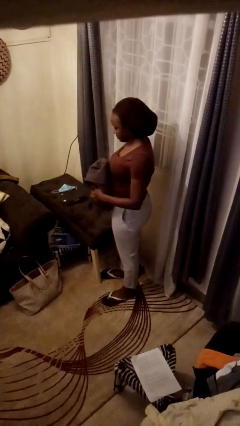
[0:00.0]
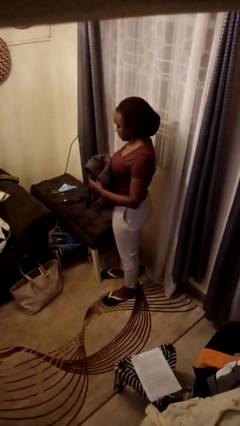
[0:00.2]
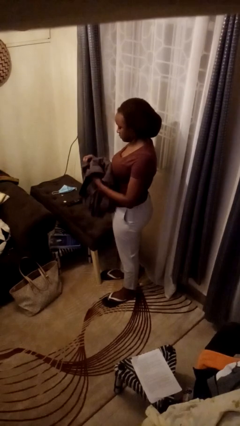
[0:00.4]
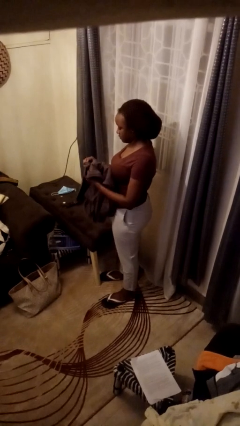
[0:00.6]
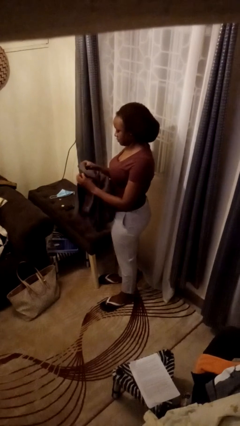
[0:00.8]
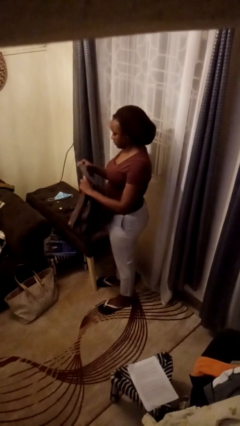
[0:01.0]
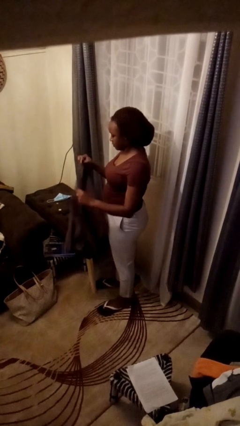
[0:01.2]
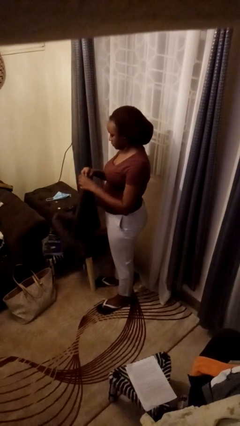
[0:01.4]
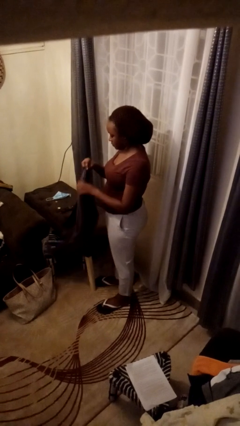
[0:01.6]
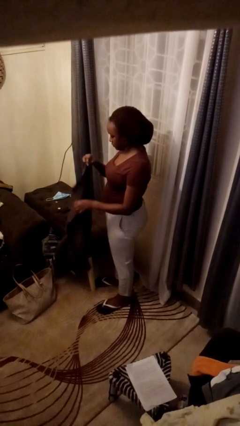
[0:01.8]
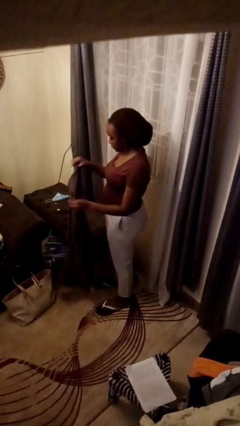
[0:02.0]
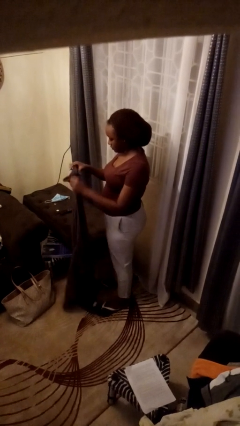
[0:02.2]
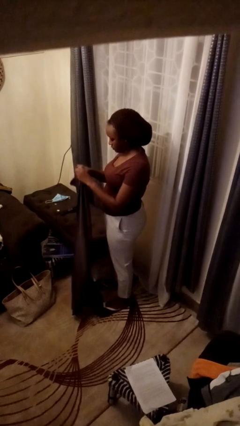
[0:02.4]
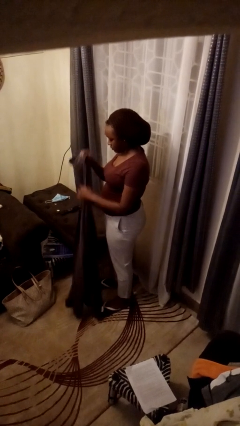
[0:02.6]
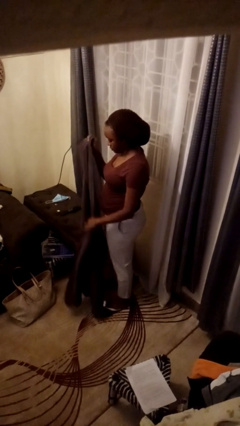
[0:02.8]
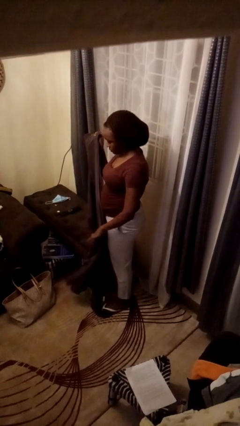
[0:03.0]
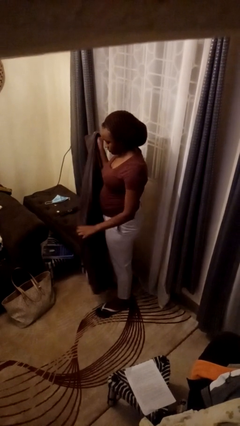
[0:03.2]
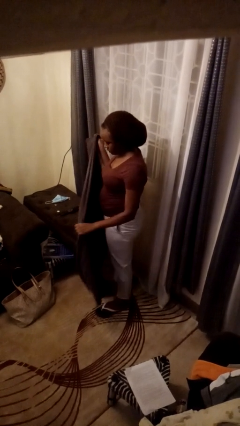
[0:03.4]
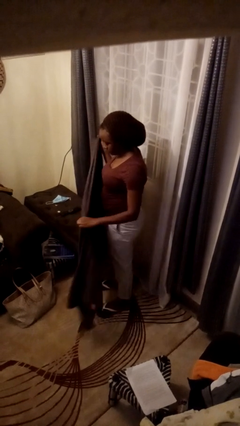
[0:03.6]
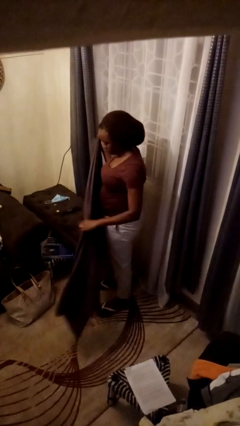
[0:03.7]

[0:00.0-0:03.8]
person unfolds blanket

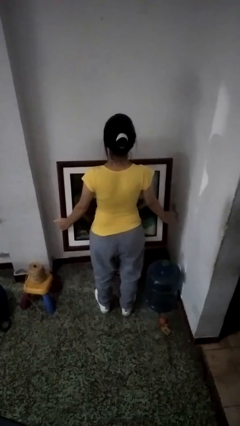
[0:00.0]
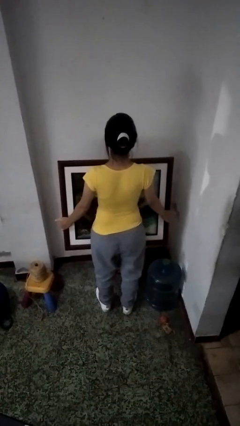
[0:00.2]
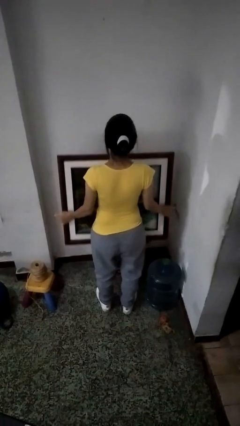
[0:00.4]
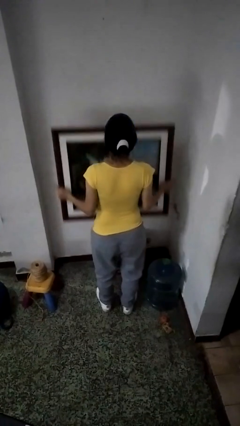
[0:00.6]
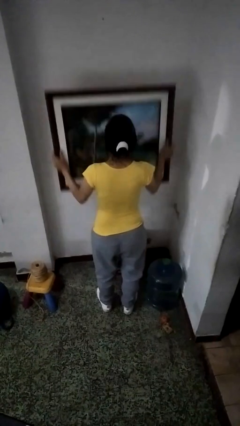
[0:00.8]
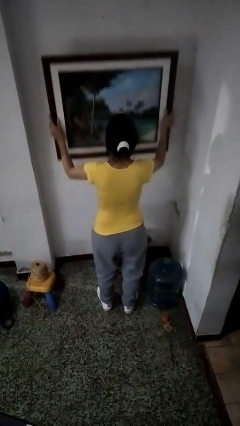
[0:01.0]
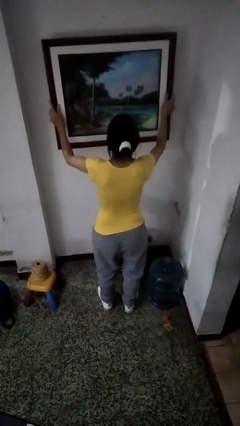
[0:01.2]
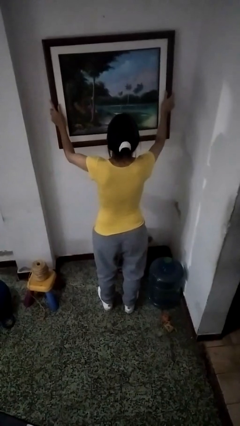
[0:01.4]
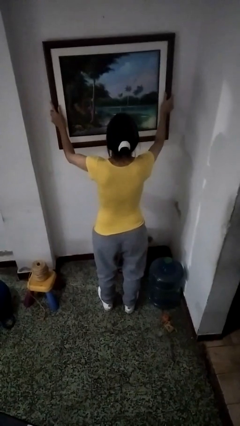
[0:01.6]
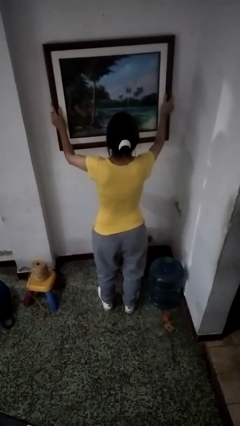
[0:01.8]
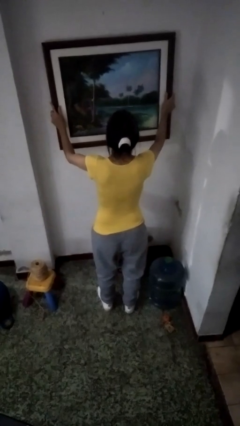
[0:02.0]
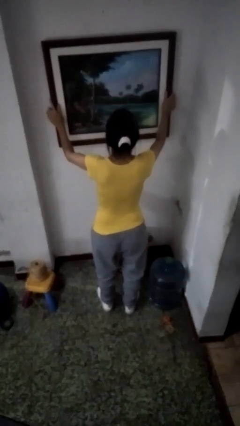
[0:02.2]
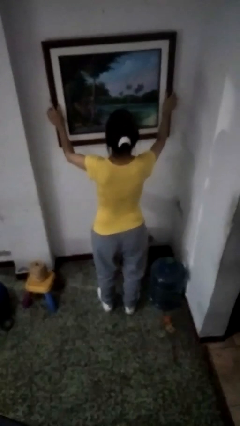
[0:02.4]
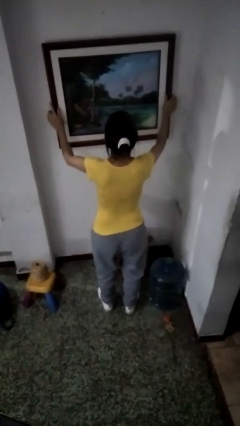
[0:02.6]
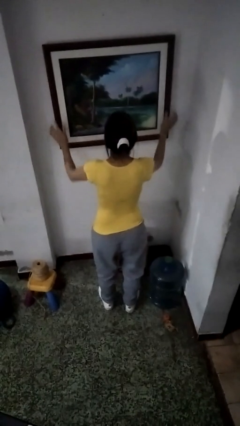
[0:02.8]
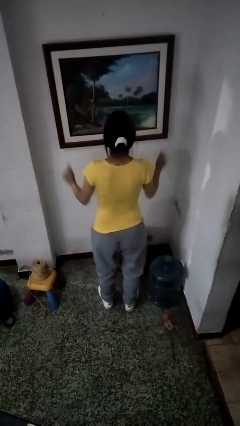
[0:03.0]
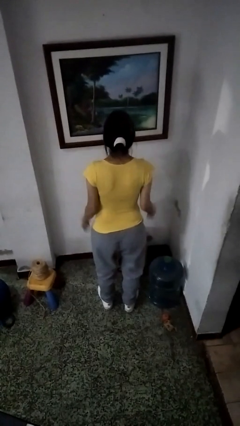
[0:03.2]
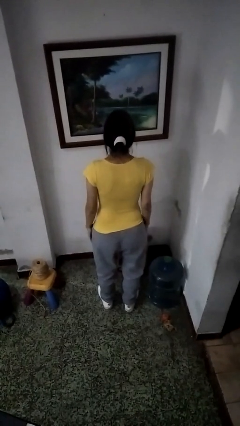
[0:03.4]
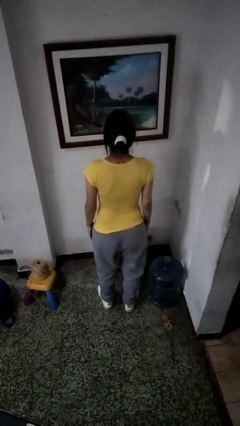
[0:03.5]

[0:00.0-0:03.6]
person puts up picture frame

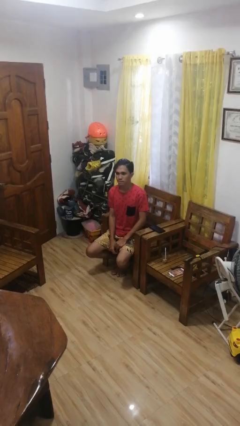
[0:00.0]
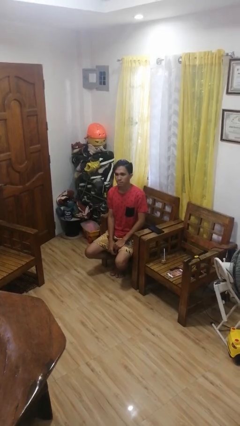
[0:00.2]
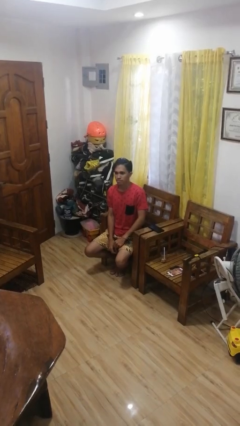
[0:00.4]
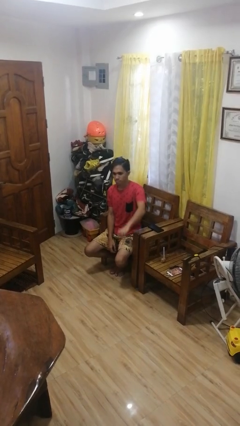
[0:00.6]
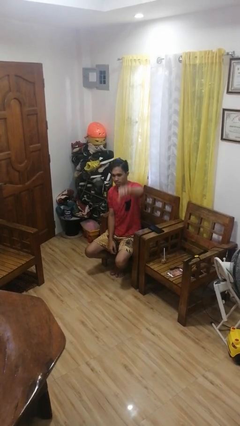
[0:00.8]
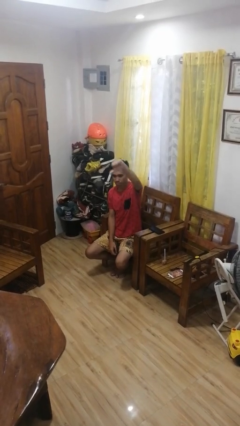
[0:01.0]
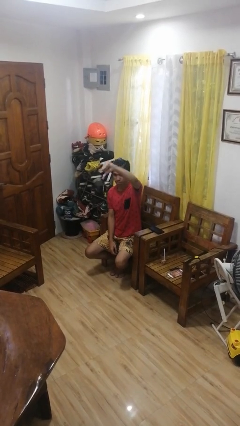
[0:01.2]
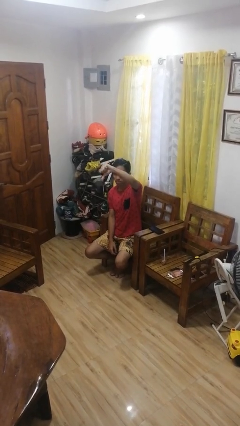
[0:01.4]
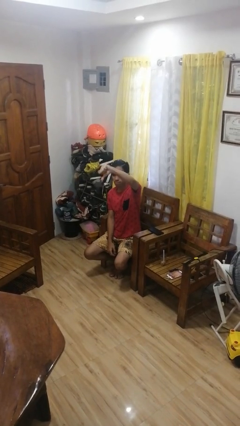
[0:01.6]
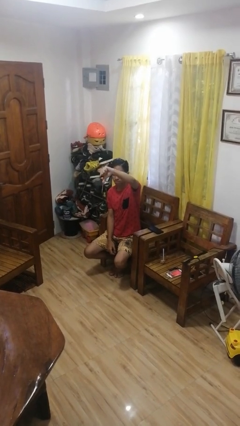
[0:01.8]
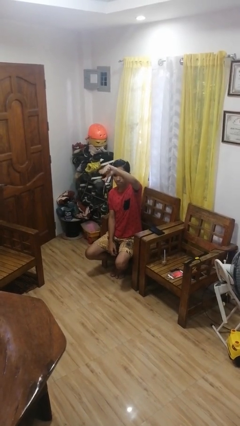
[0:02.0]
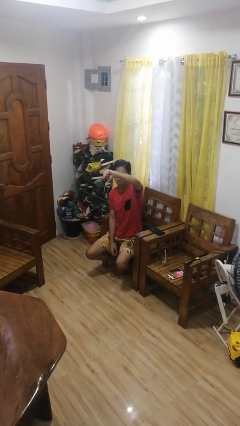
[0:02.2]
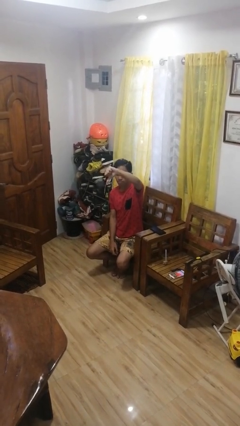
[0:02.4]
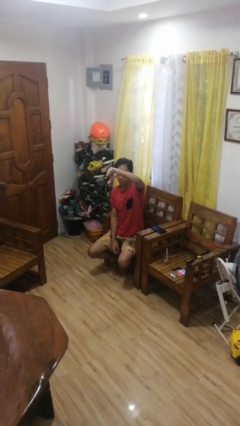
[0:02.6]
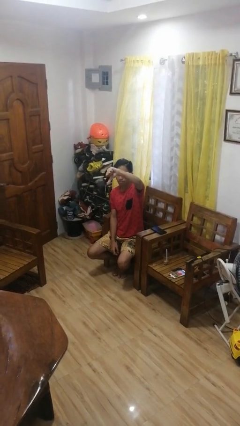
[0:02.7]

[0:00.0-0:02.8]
person gestures thumbs down

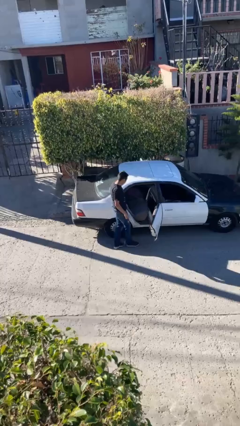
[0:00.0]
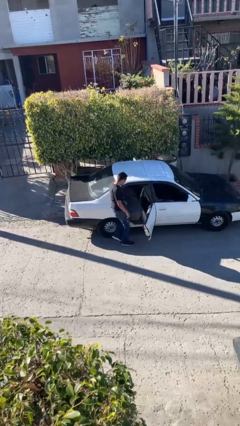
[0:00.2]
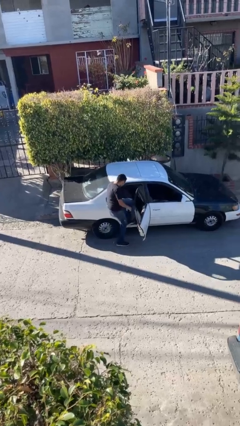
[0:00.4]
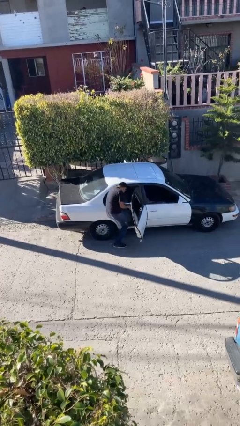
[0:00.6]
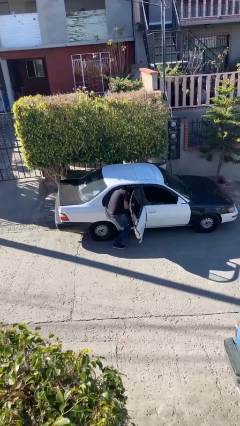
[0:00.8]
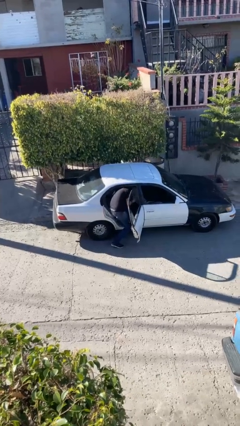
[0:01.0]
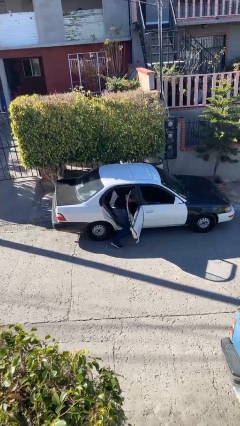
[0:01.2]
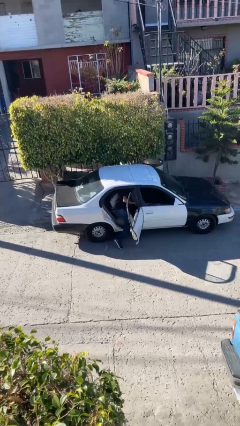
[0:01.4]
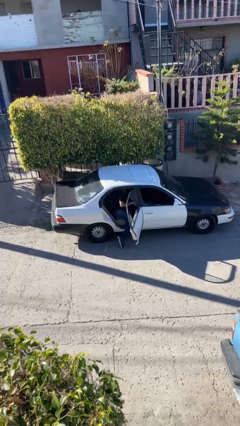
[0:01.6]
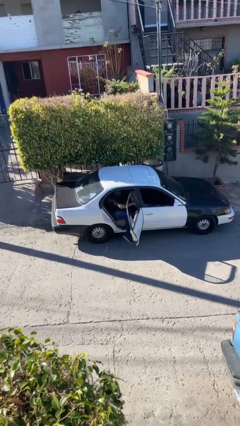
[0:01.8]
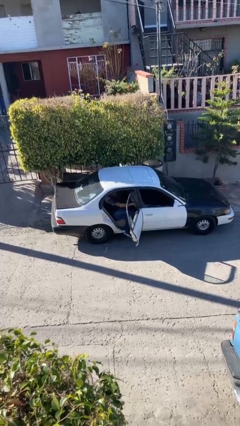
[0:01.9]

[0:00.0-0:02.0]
person enters car

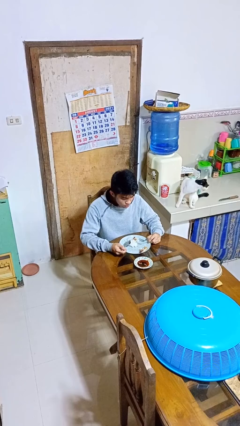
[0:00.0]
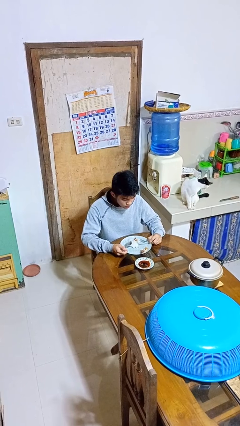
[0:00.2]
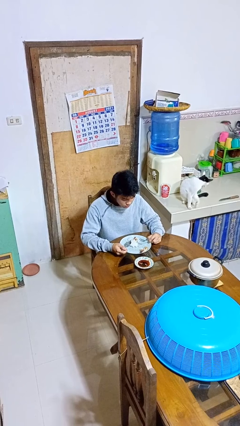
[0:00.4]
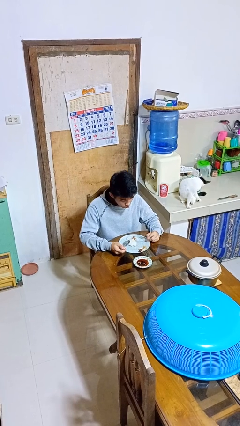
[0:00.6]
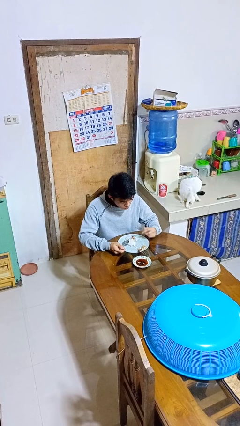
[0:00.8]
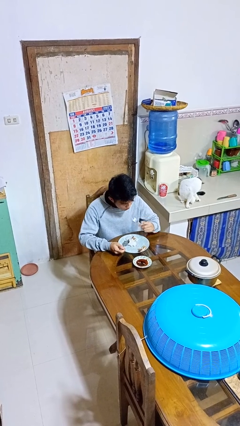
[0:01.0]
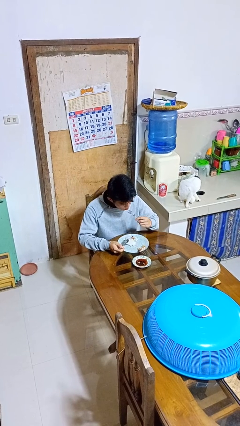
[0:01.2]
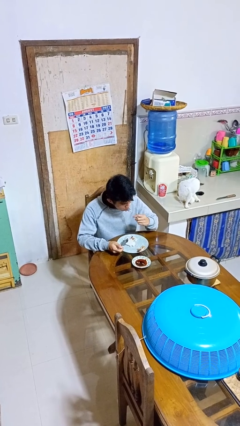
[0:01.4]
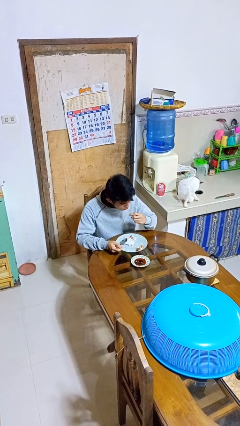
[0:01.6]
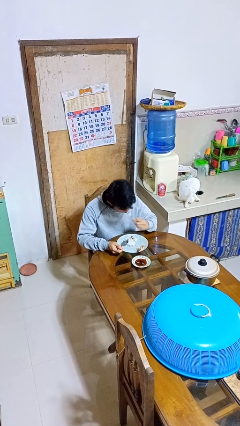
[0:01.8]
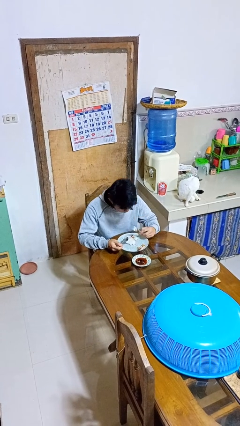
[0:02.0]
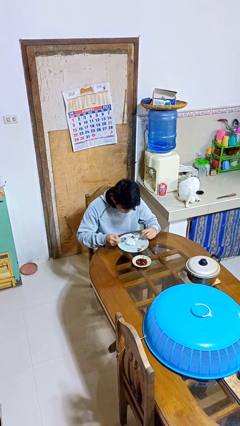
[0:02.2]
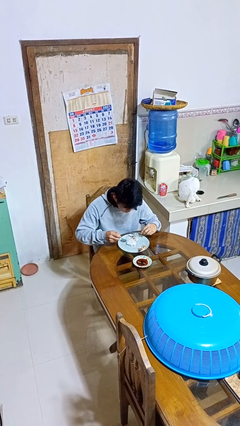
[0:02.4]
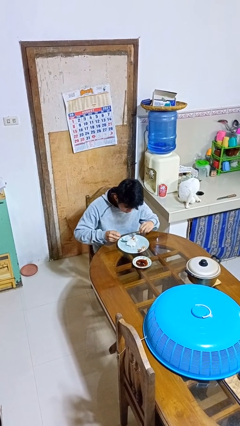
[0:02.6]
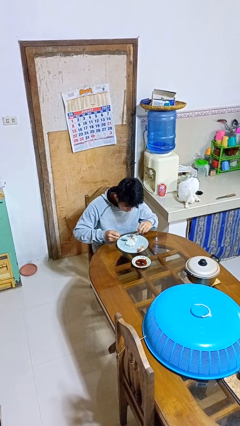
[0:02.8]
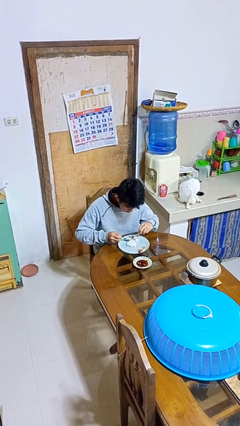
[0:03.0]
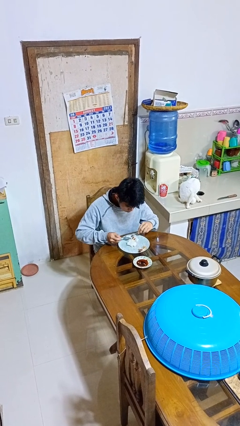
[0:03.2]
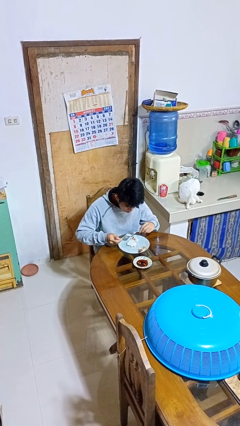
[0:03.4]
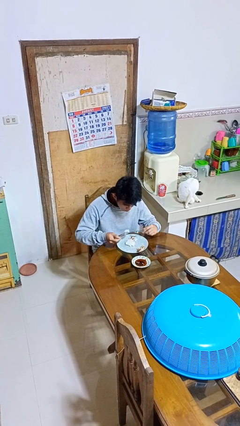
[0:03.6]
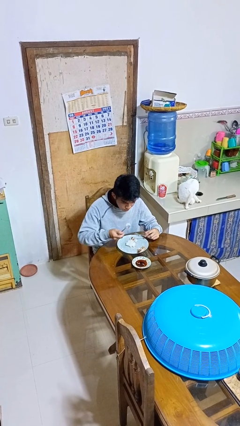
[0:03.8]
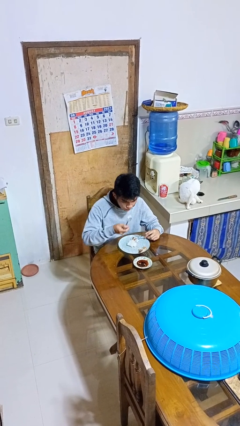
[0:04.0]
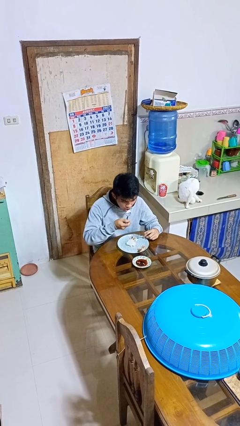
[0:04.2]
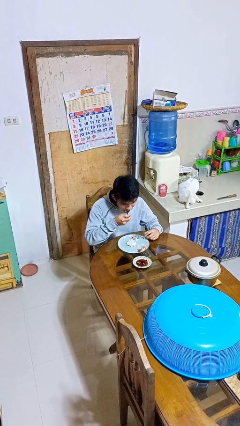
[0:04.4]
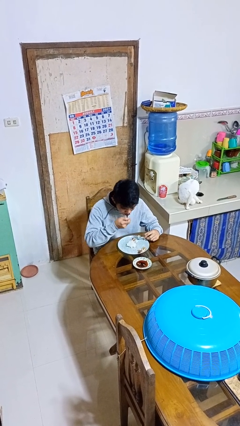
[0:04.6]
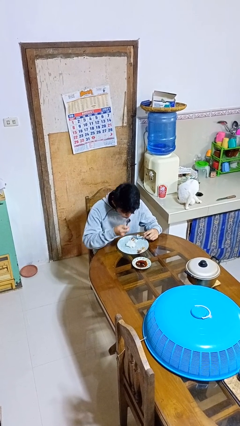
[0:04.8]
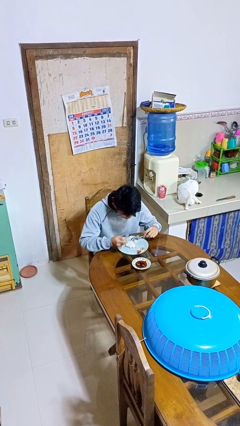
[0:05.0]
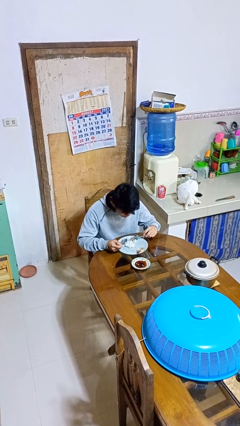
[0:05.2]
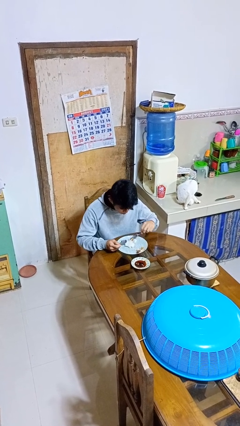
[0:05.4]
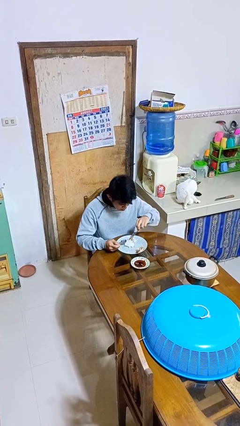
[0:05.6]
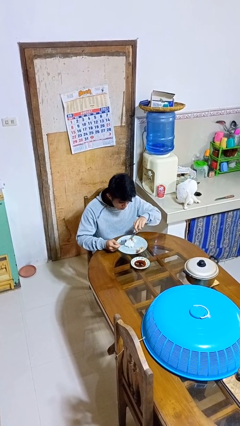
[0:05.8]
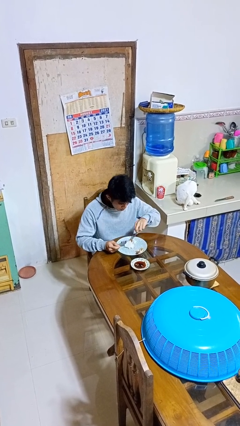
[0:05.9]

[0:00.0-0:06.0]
person eats with utensil
